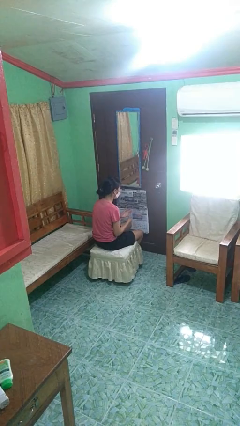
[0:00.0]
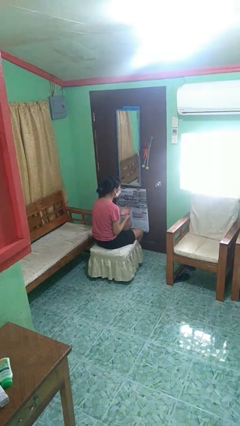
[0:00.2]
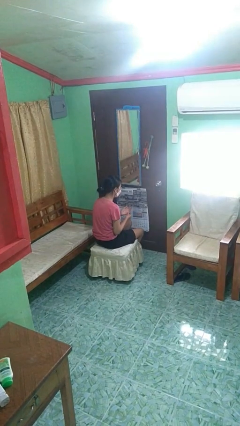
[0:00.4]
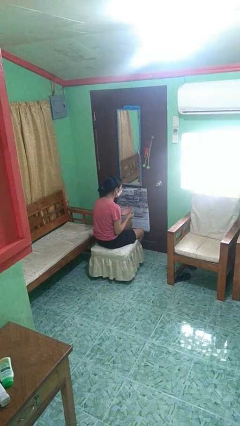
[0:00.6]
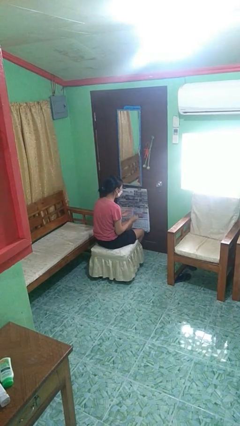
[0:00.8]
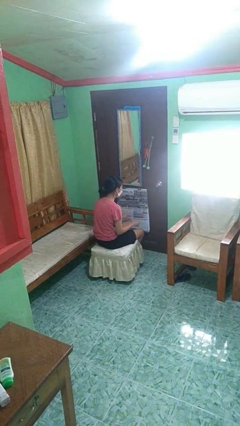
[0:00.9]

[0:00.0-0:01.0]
person takes off ring

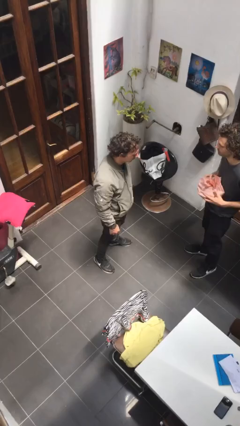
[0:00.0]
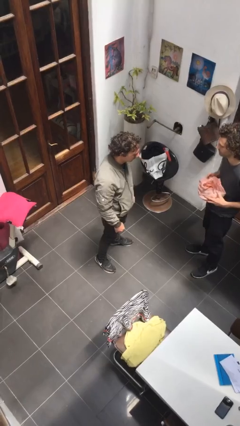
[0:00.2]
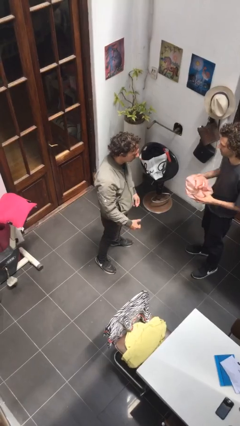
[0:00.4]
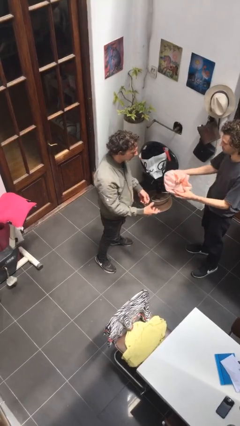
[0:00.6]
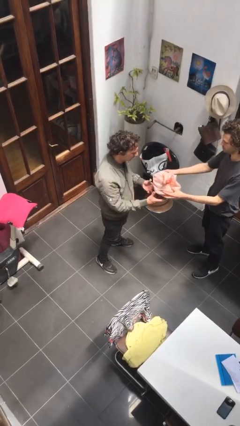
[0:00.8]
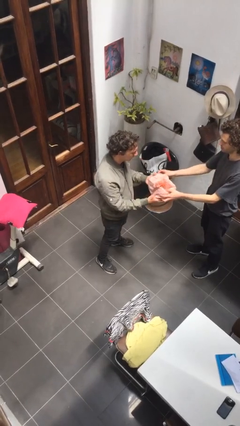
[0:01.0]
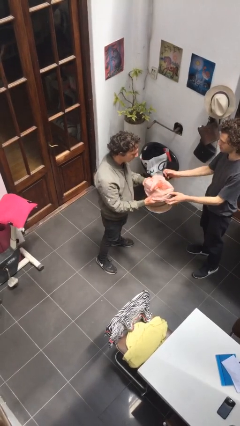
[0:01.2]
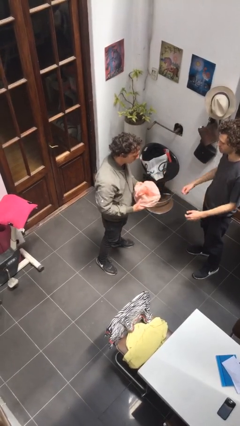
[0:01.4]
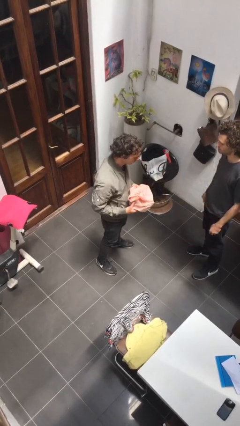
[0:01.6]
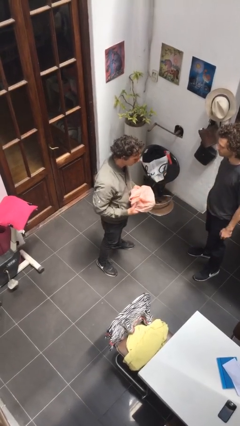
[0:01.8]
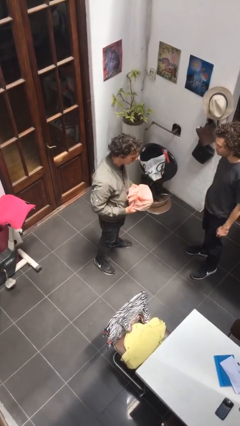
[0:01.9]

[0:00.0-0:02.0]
person transfers object to person

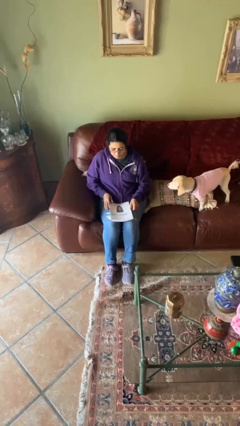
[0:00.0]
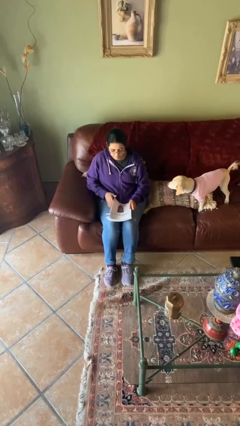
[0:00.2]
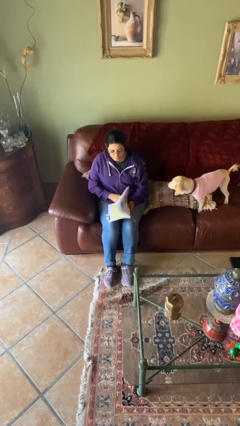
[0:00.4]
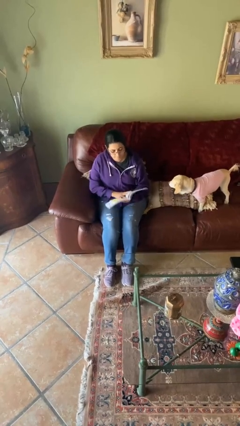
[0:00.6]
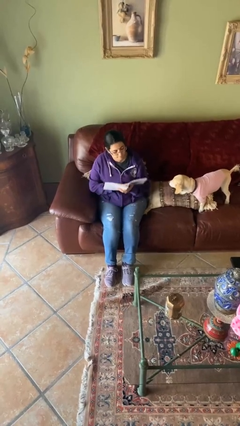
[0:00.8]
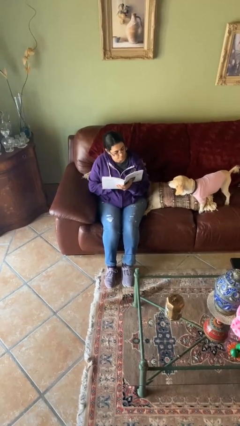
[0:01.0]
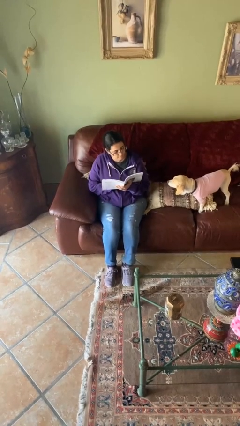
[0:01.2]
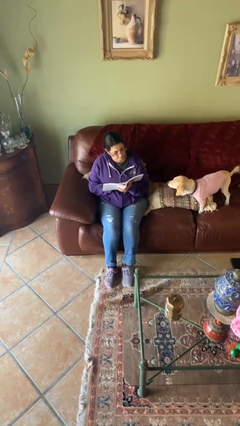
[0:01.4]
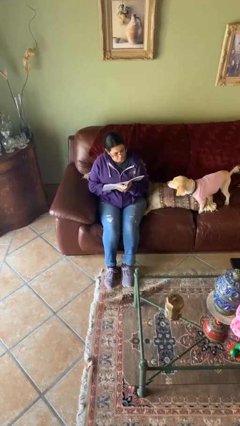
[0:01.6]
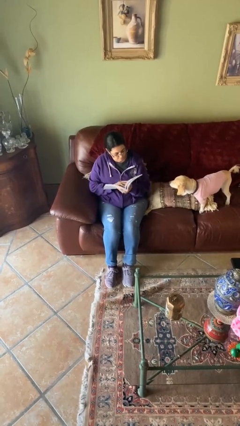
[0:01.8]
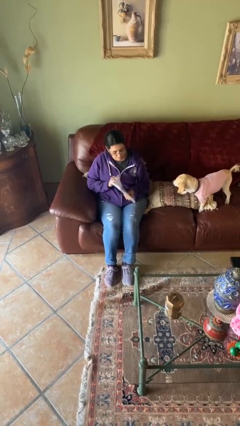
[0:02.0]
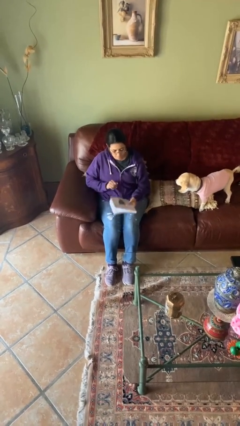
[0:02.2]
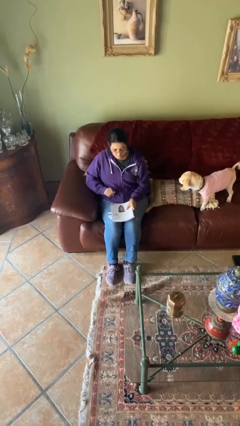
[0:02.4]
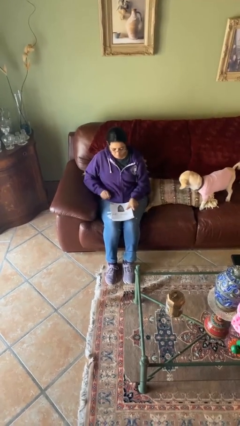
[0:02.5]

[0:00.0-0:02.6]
person reads document

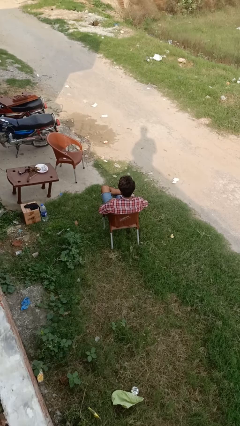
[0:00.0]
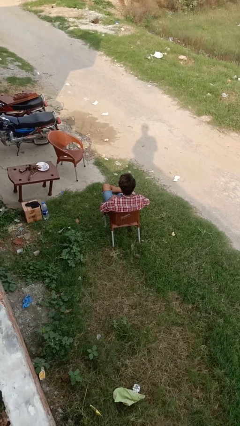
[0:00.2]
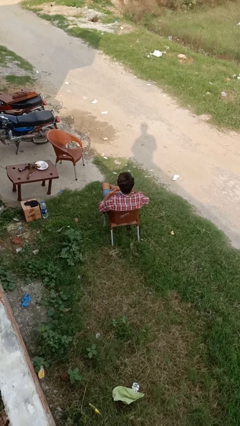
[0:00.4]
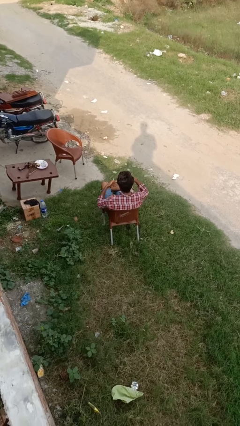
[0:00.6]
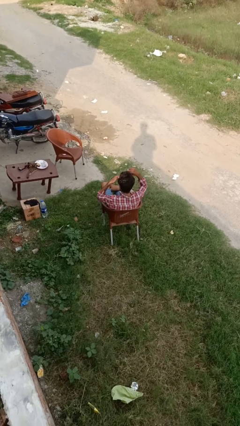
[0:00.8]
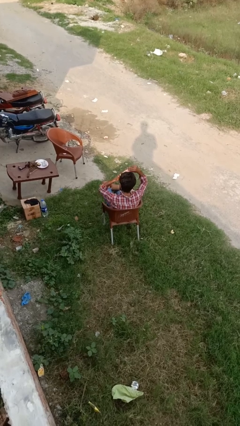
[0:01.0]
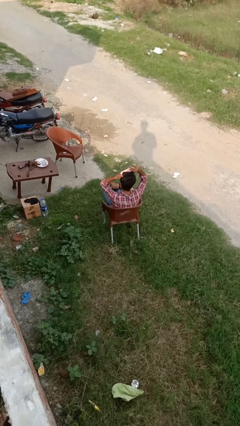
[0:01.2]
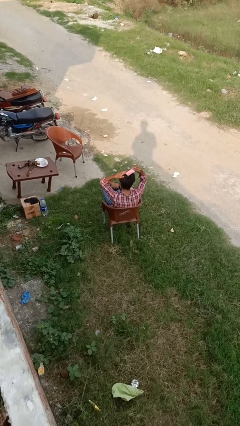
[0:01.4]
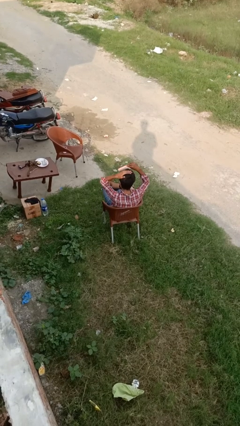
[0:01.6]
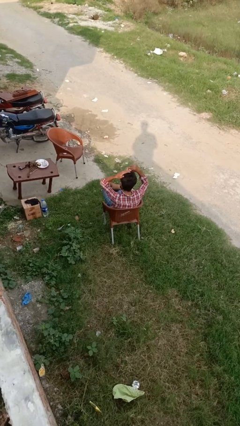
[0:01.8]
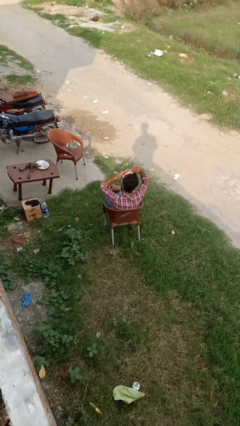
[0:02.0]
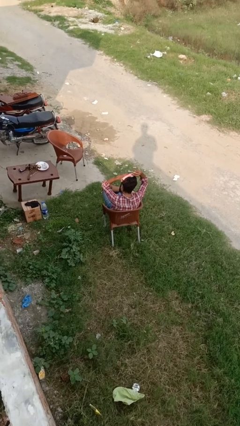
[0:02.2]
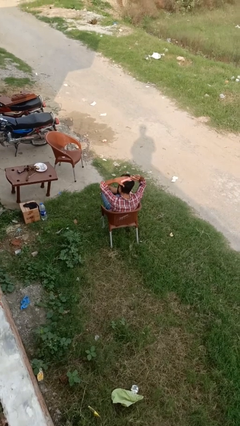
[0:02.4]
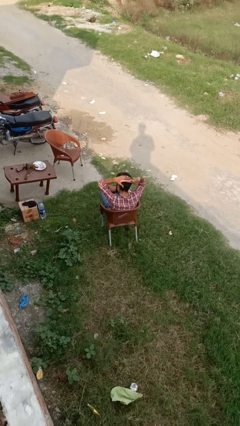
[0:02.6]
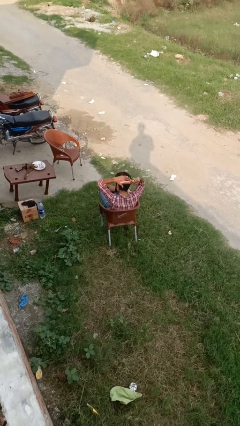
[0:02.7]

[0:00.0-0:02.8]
person brushes hair

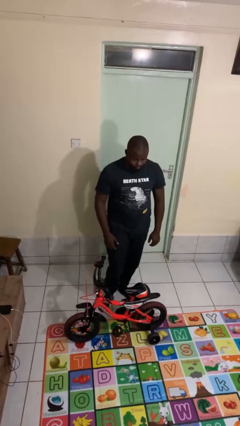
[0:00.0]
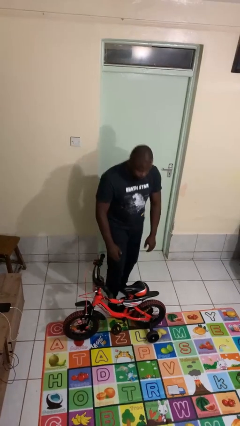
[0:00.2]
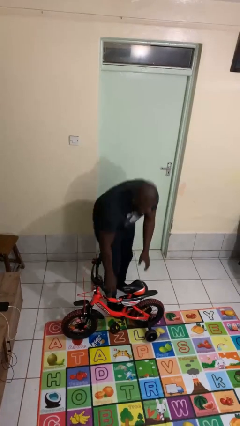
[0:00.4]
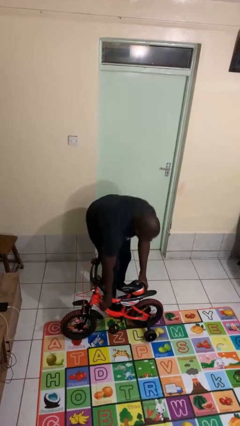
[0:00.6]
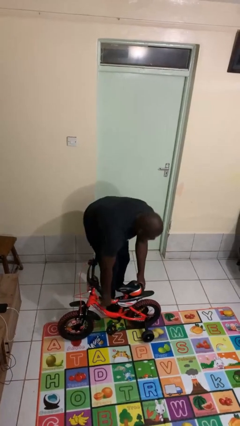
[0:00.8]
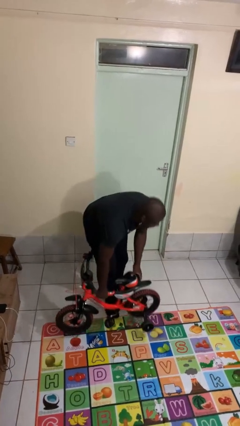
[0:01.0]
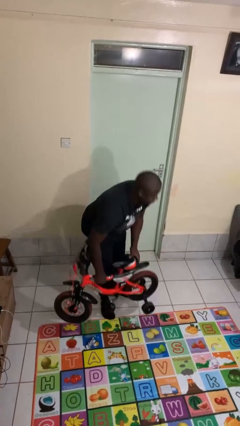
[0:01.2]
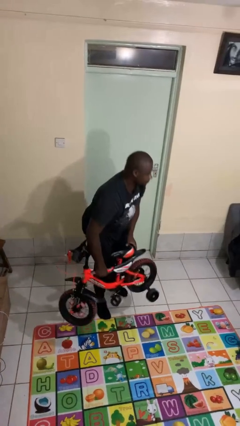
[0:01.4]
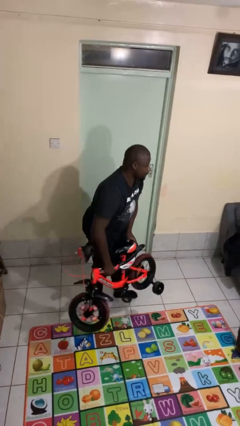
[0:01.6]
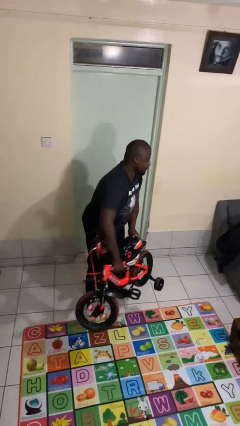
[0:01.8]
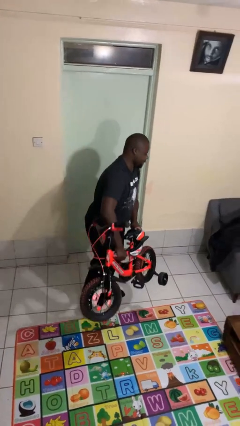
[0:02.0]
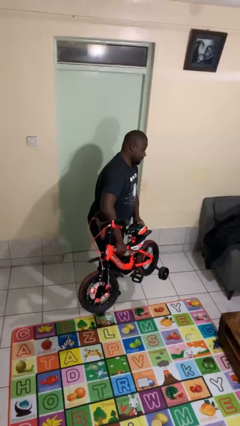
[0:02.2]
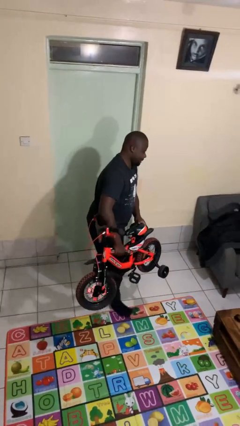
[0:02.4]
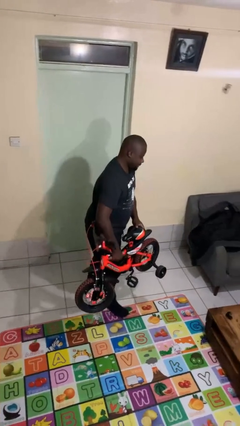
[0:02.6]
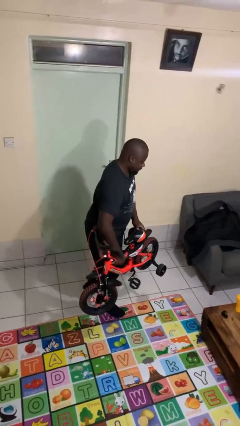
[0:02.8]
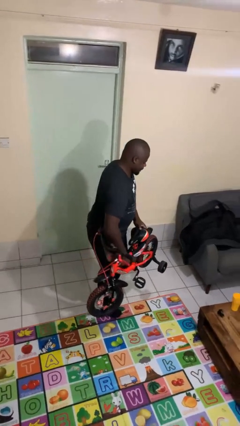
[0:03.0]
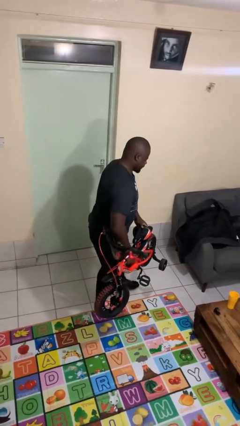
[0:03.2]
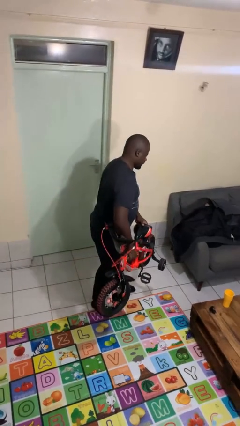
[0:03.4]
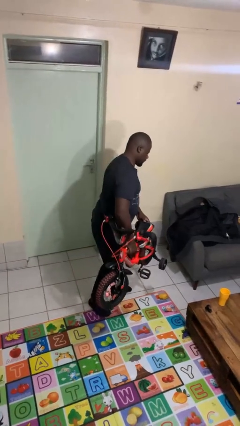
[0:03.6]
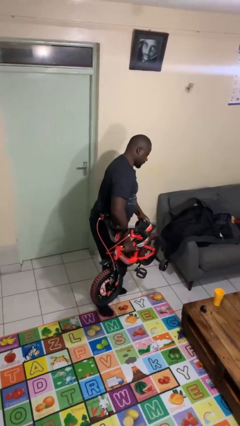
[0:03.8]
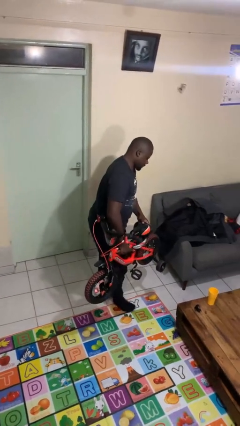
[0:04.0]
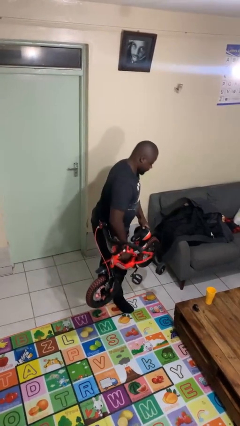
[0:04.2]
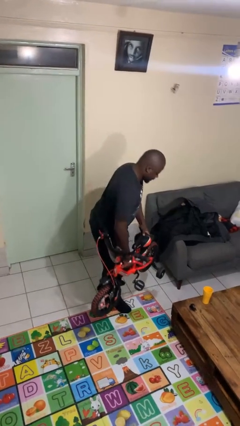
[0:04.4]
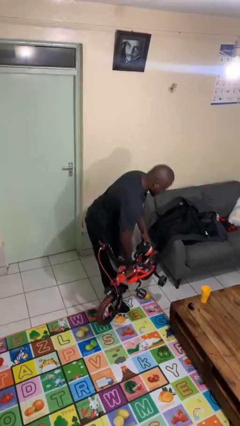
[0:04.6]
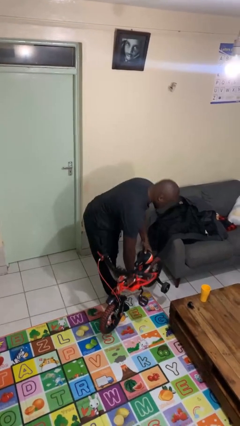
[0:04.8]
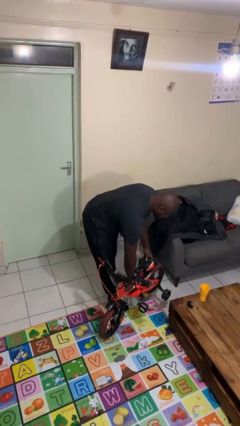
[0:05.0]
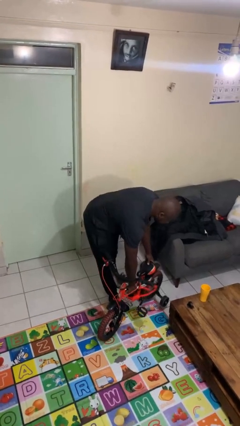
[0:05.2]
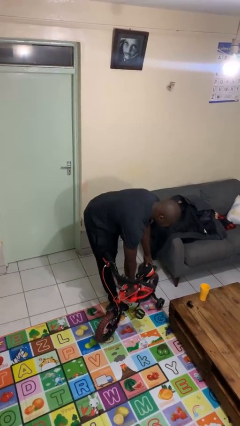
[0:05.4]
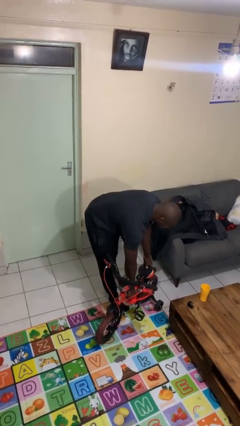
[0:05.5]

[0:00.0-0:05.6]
person carries bicycle

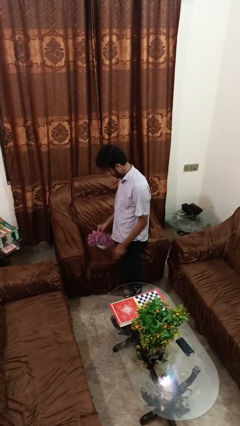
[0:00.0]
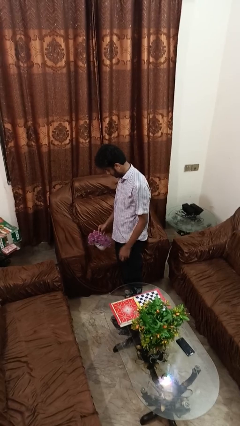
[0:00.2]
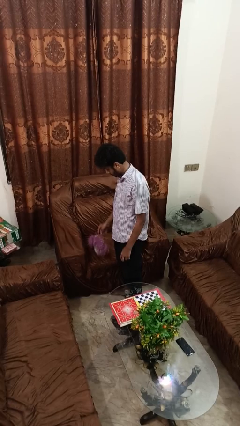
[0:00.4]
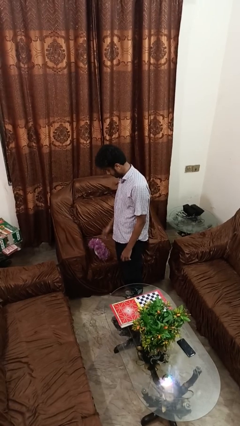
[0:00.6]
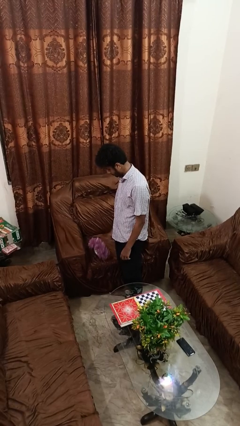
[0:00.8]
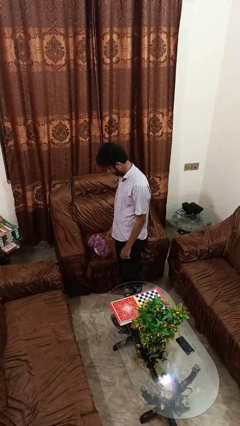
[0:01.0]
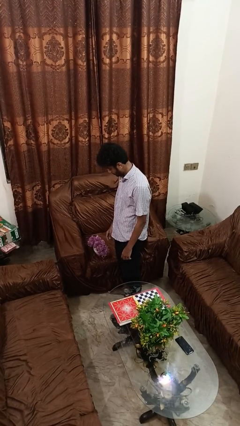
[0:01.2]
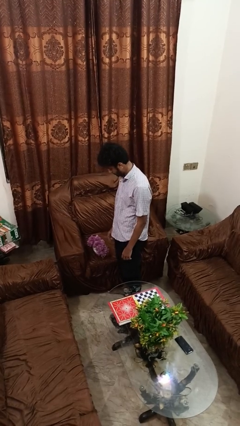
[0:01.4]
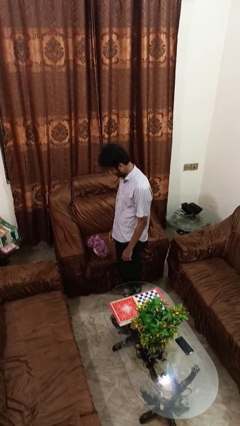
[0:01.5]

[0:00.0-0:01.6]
person puts down object on couch

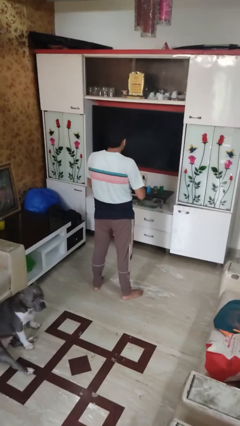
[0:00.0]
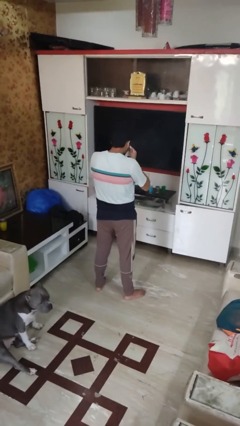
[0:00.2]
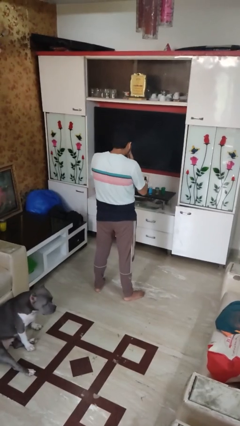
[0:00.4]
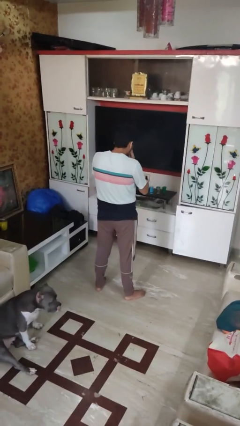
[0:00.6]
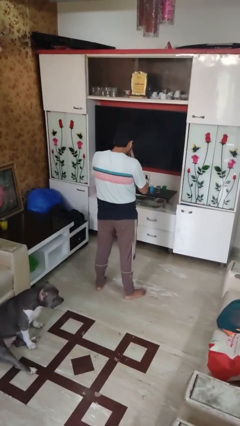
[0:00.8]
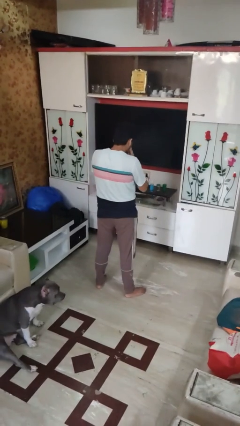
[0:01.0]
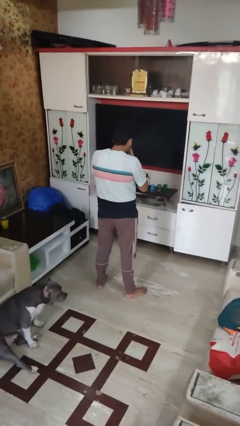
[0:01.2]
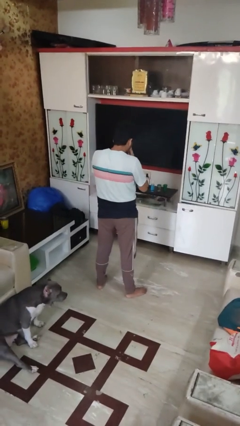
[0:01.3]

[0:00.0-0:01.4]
person blows nose

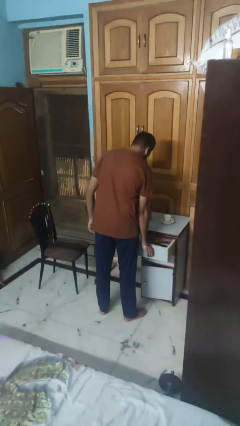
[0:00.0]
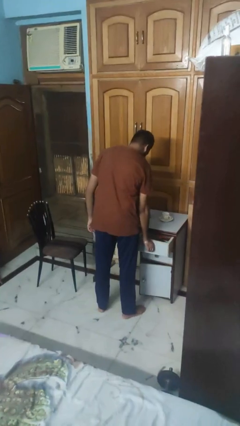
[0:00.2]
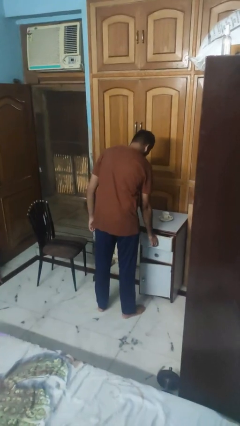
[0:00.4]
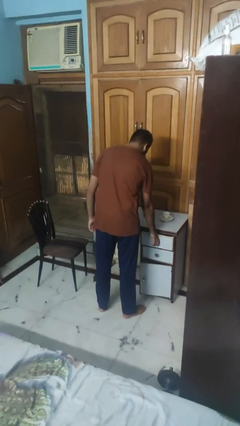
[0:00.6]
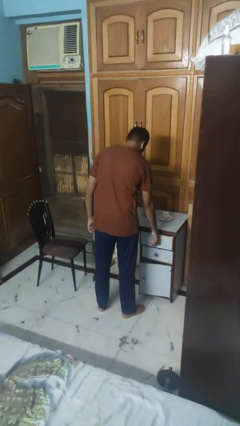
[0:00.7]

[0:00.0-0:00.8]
person closes kitchen drawer
